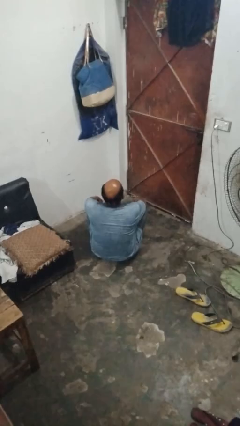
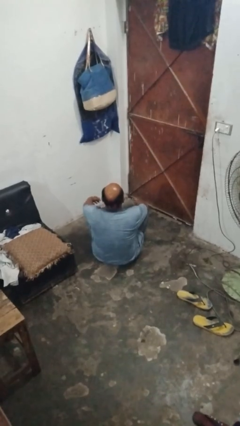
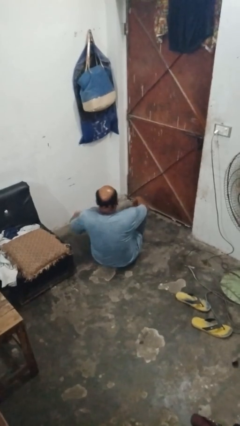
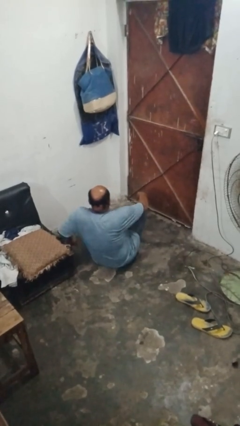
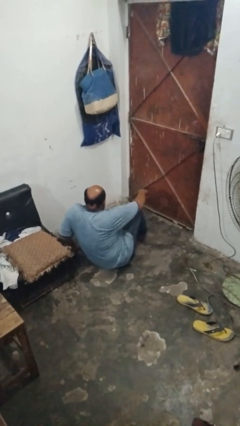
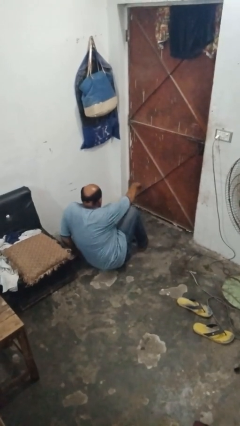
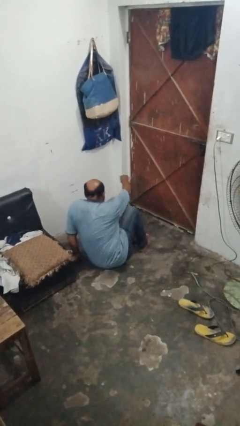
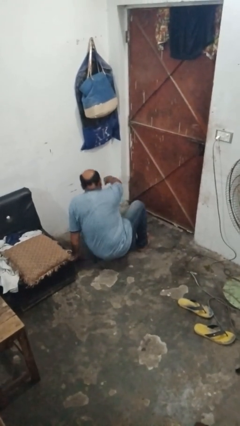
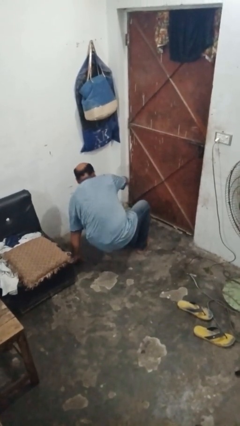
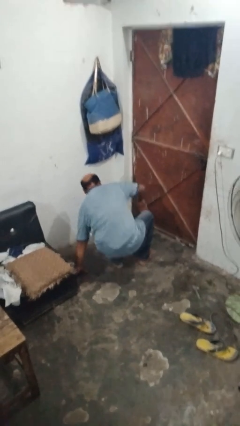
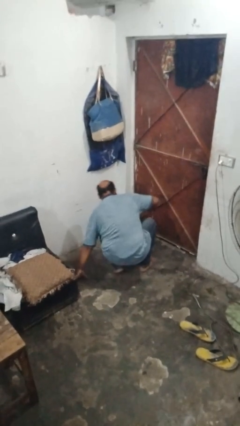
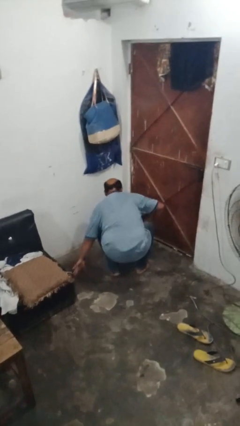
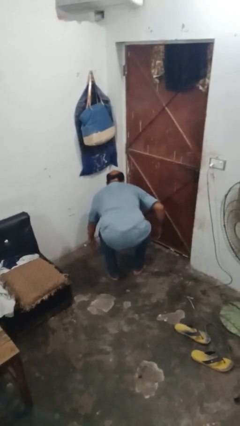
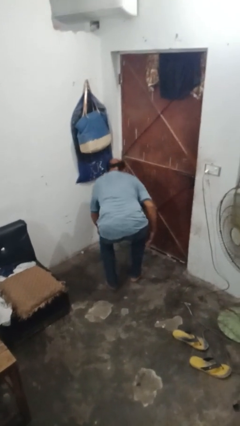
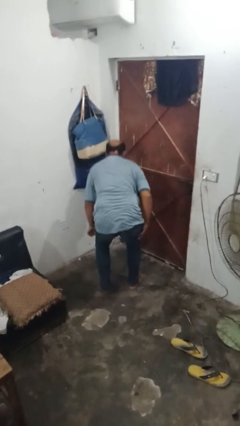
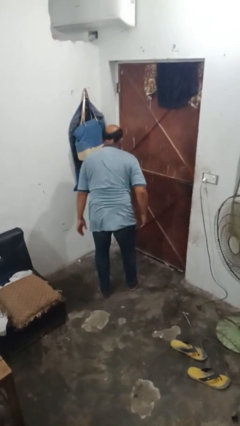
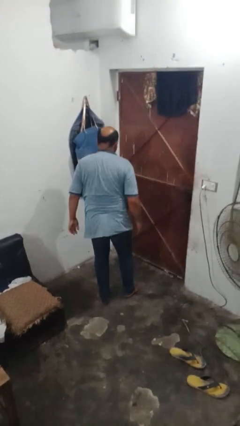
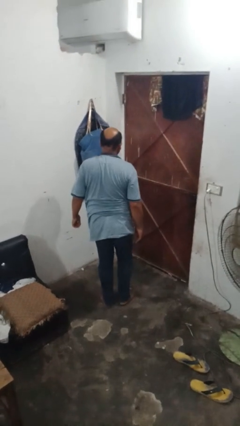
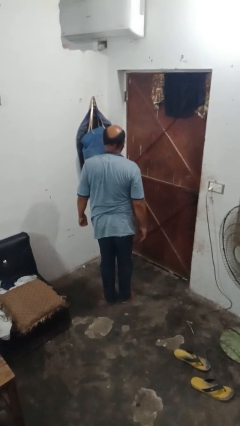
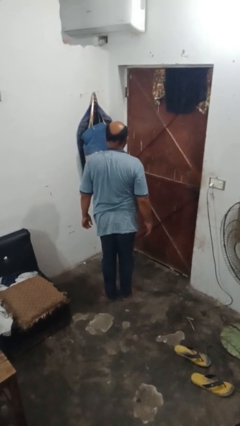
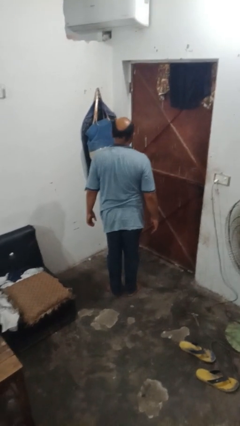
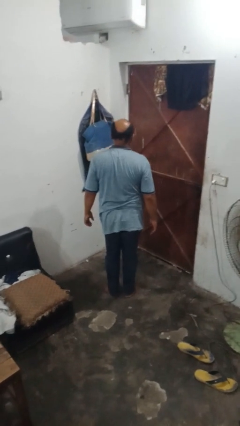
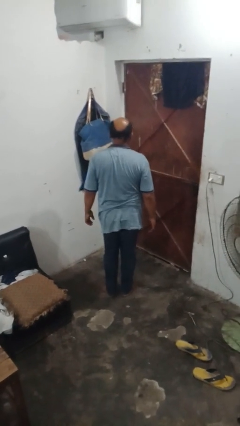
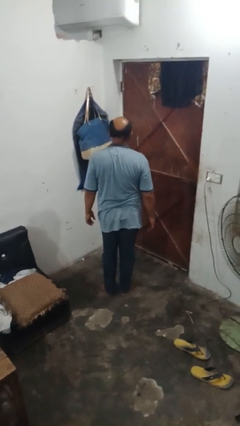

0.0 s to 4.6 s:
person stands up from floor

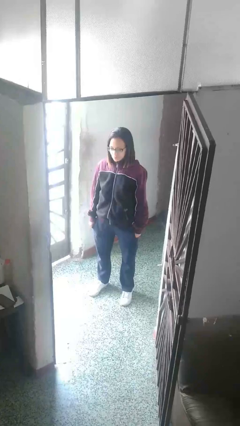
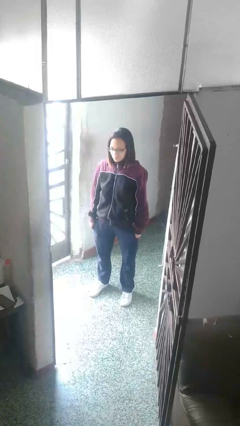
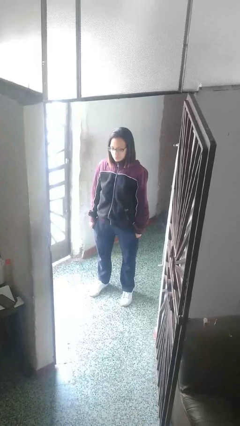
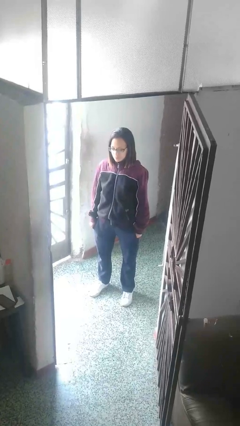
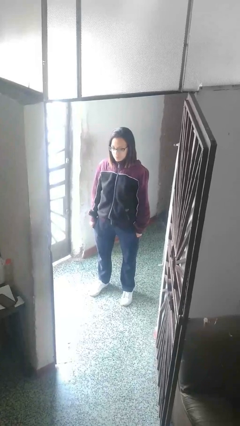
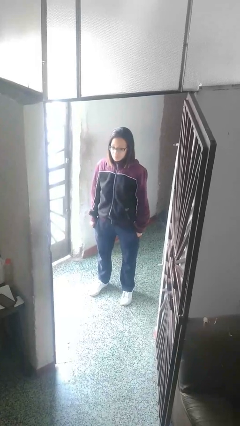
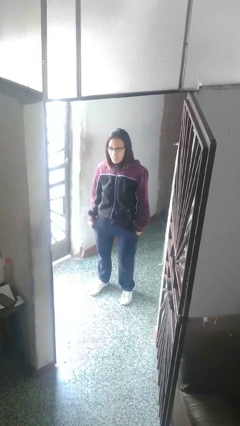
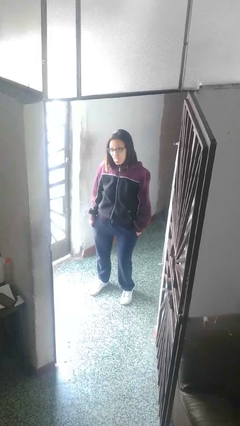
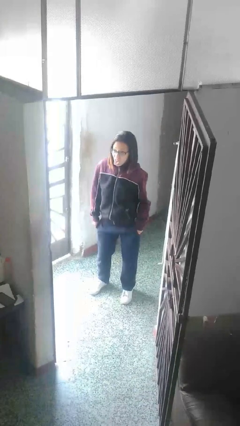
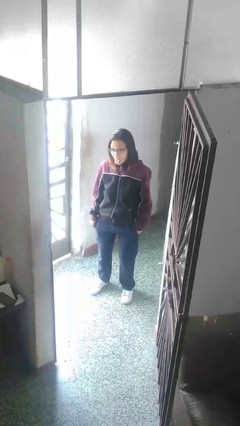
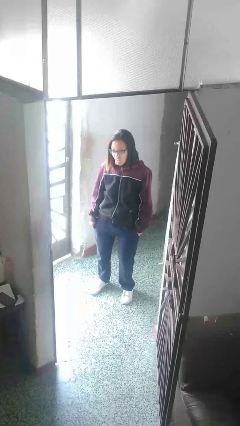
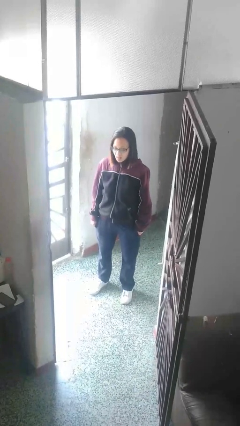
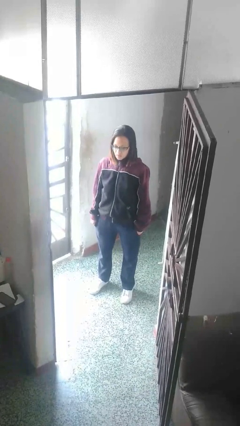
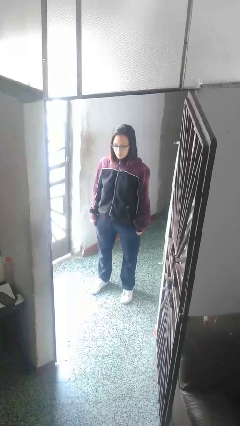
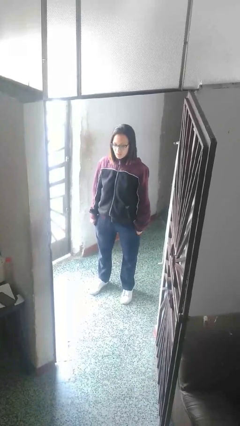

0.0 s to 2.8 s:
person sticks out tongue

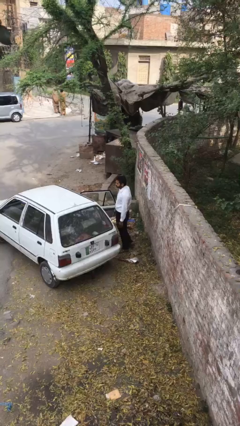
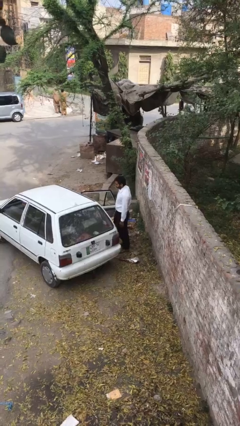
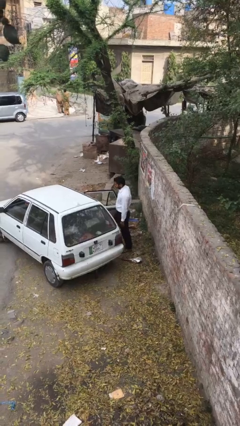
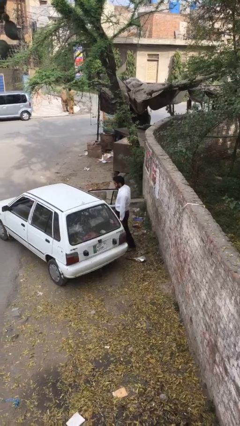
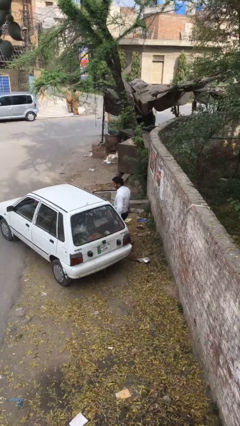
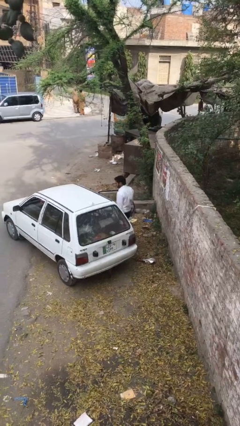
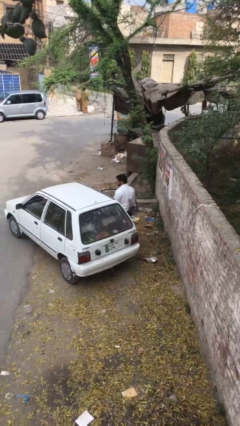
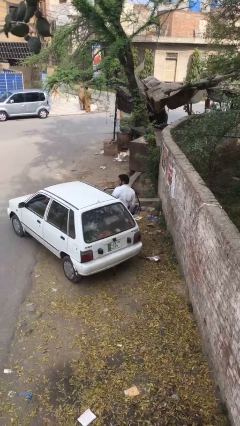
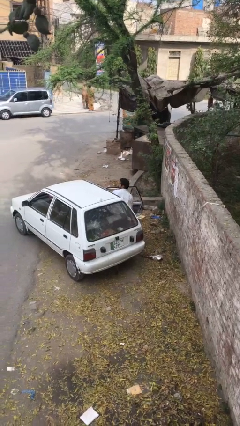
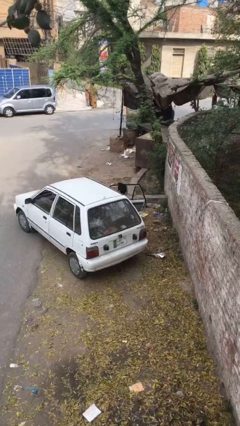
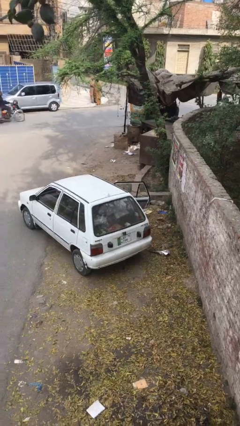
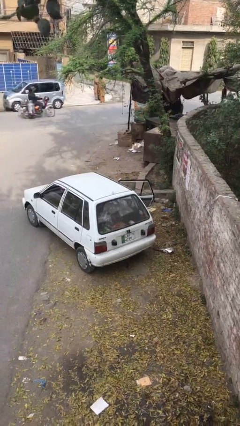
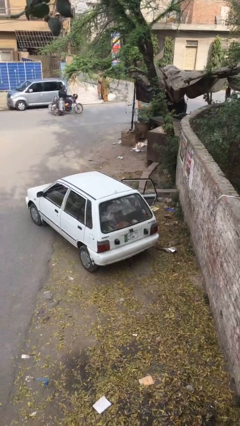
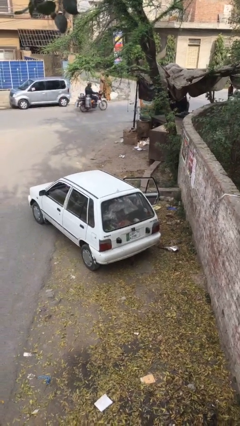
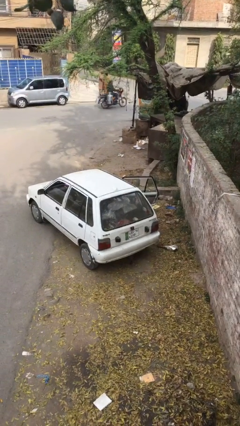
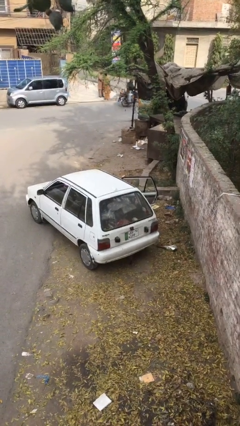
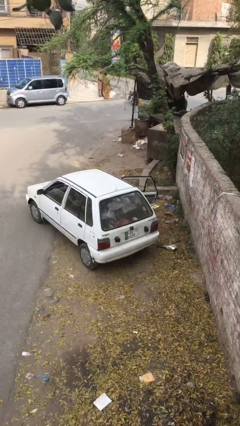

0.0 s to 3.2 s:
person enters car

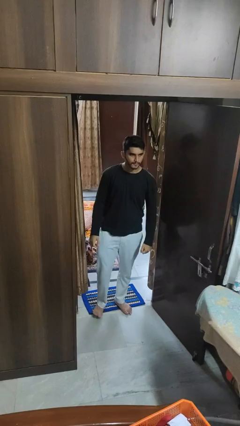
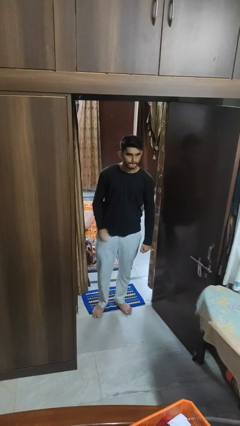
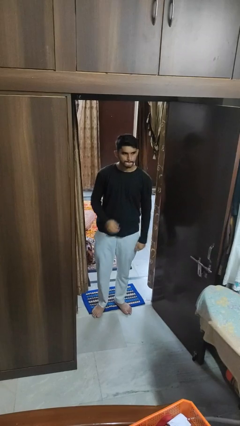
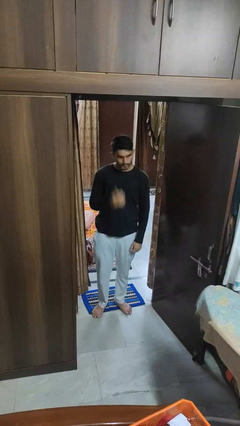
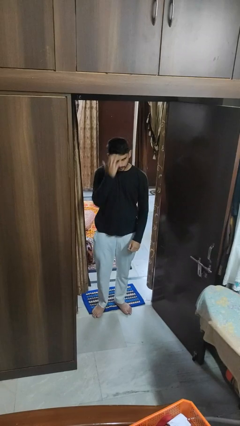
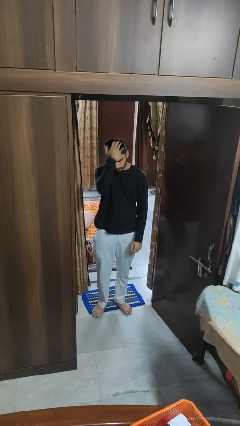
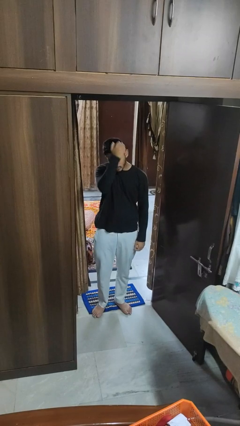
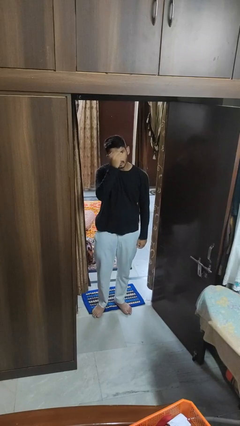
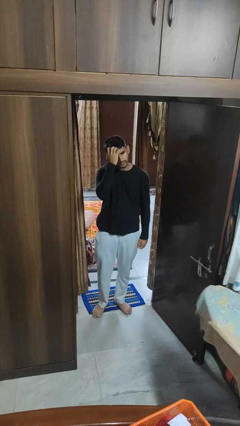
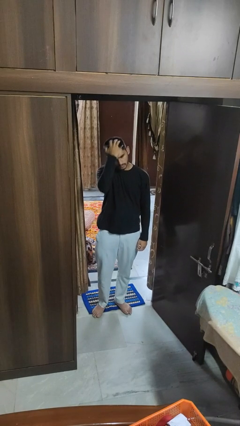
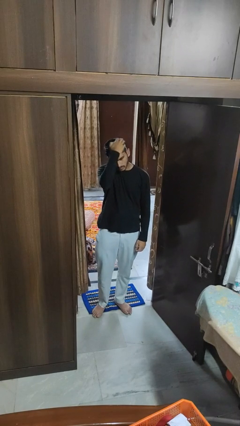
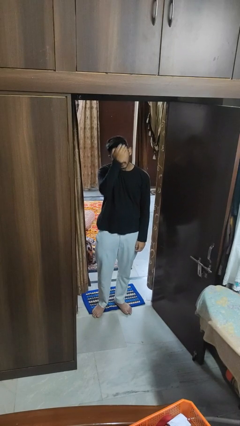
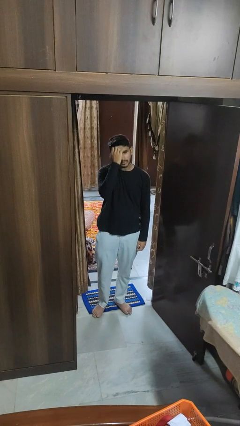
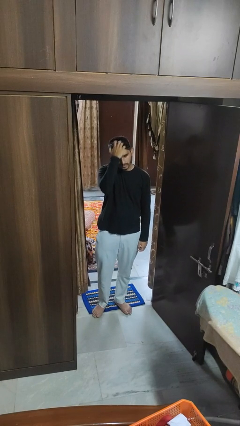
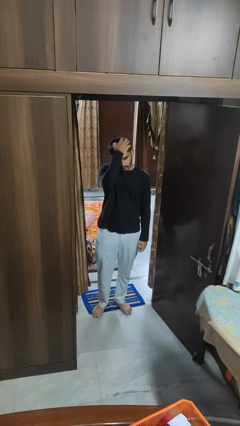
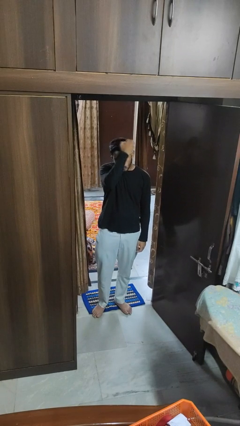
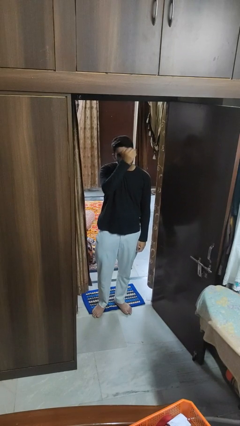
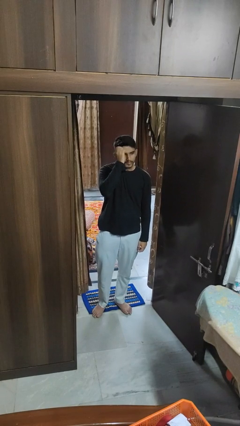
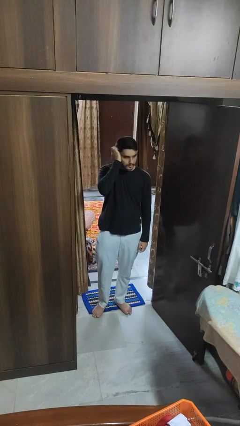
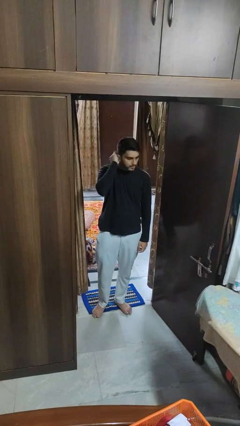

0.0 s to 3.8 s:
person strokes hair

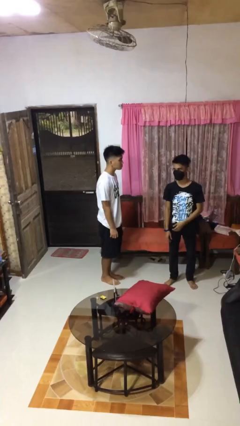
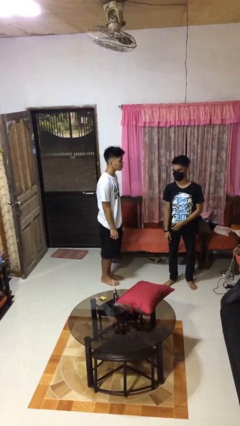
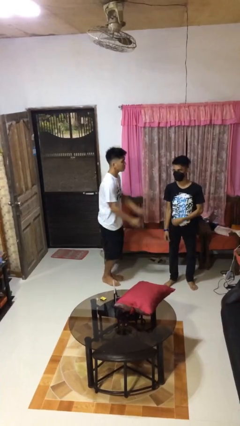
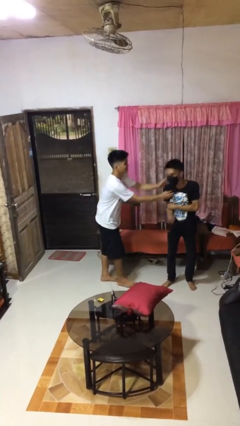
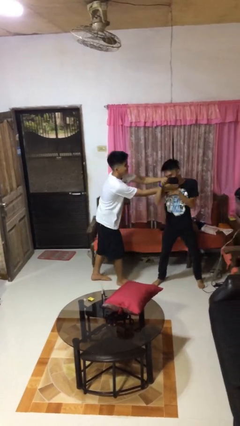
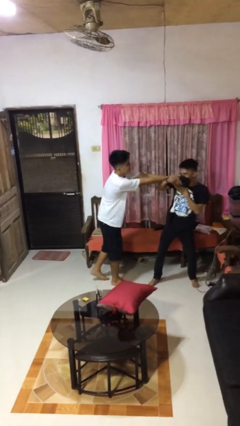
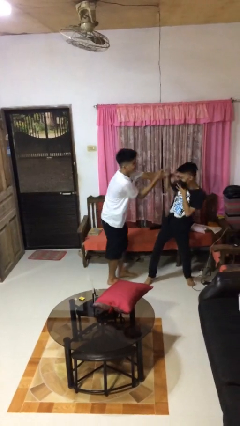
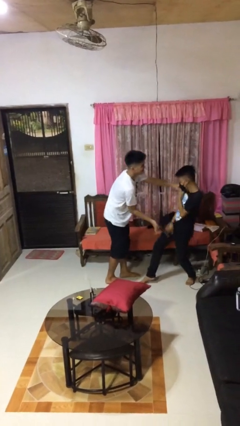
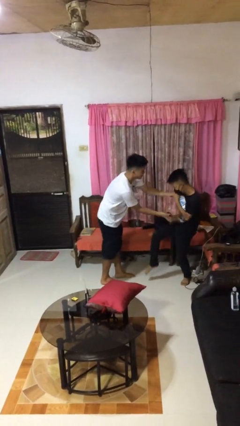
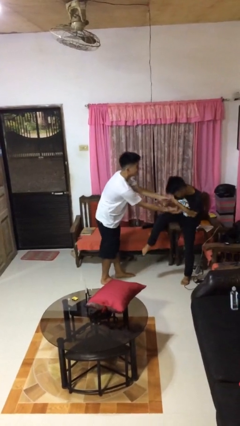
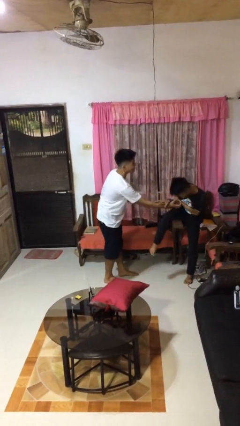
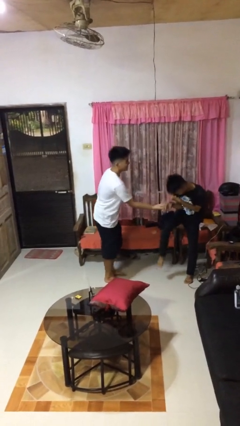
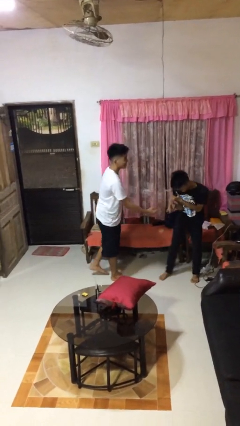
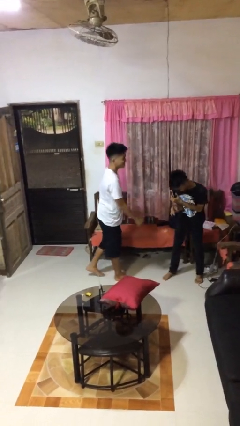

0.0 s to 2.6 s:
person tickles person

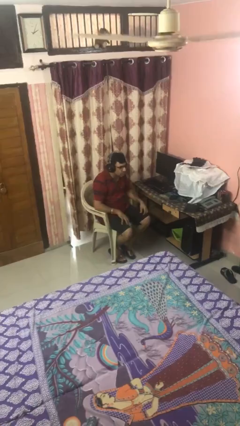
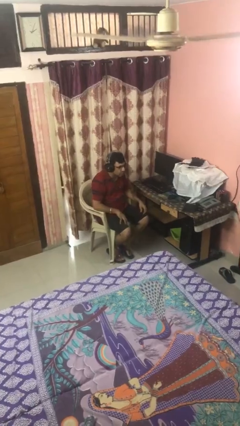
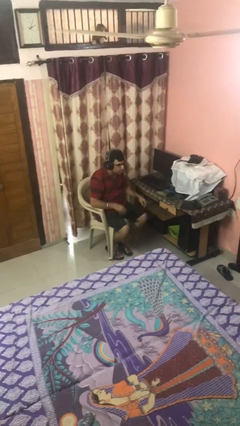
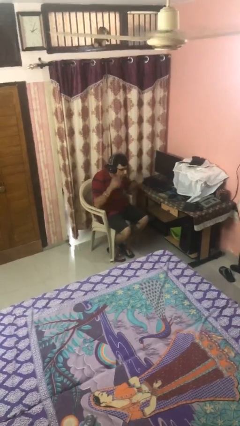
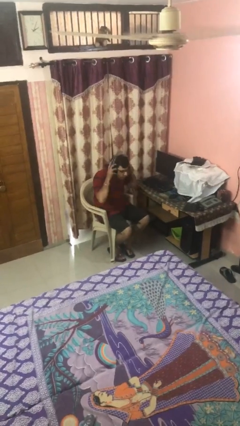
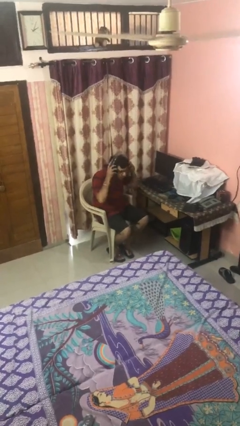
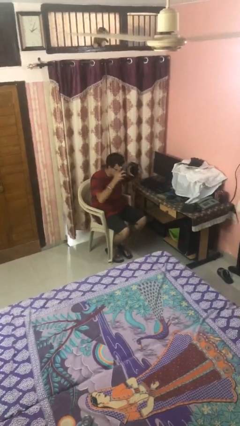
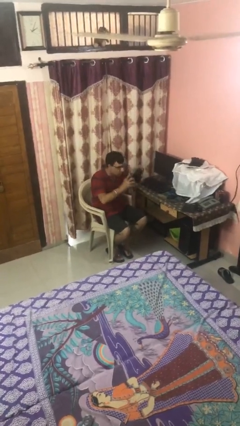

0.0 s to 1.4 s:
person takes off headphones
